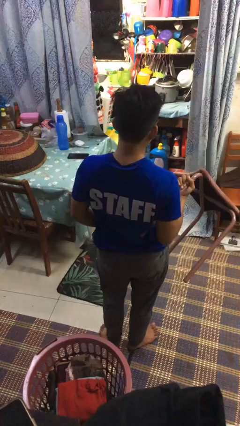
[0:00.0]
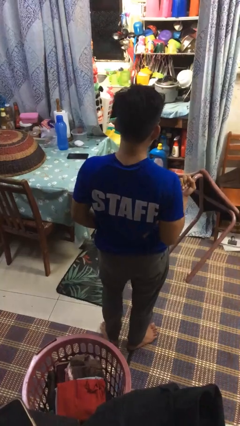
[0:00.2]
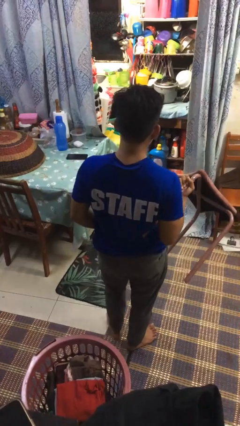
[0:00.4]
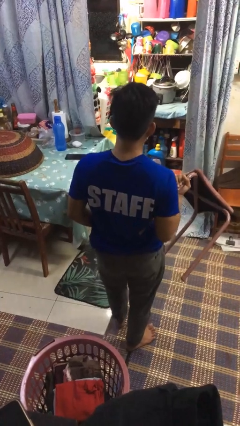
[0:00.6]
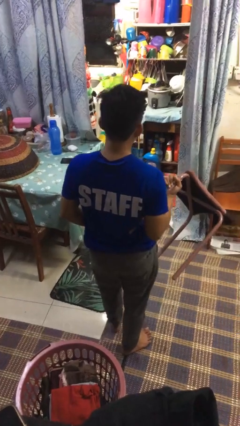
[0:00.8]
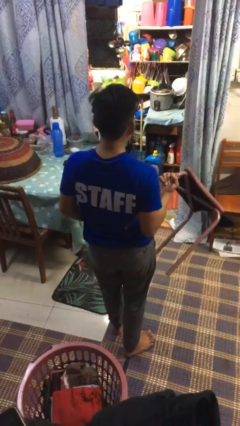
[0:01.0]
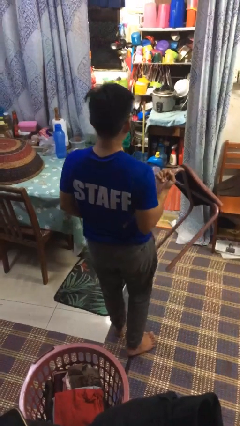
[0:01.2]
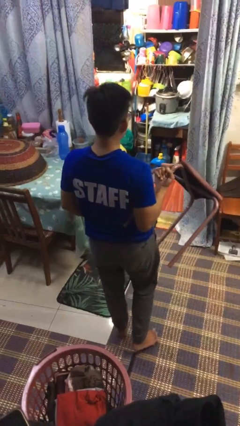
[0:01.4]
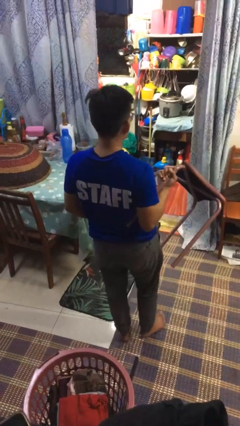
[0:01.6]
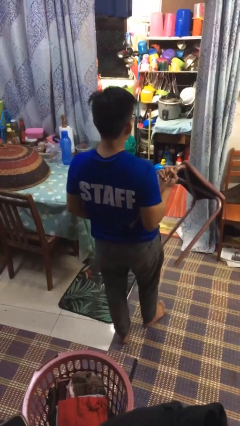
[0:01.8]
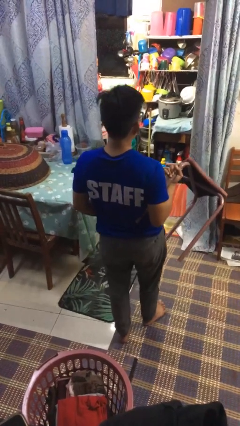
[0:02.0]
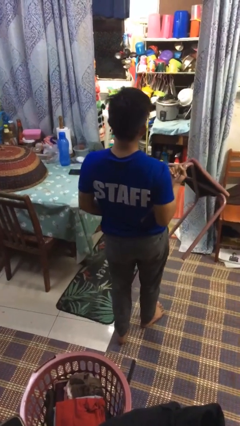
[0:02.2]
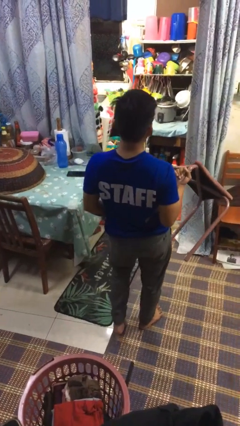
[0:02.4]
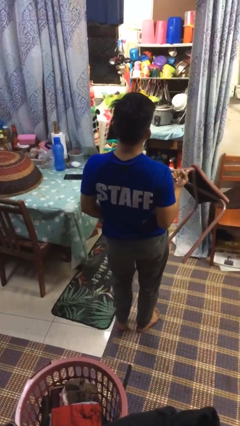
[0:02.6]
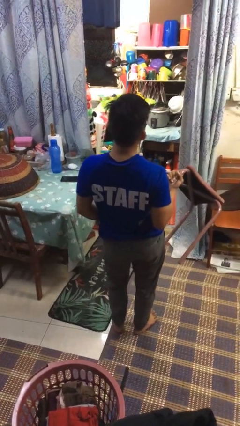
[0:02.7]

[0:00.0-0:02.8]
person carries furniture

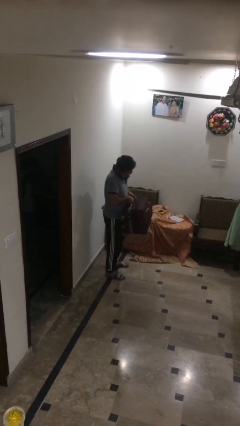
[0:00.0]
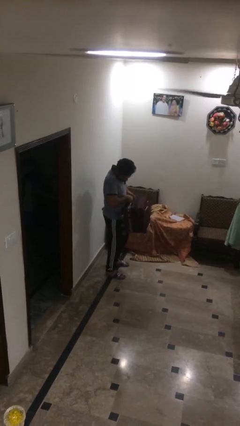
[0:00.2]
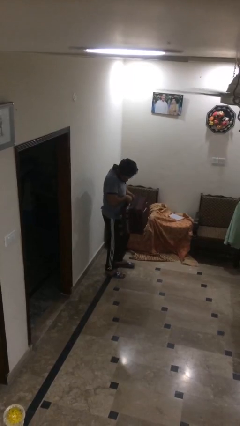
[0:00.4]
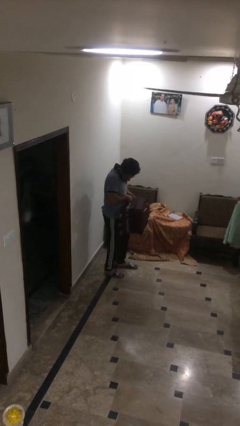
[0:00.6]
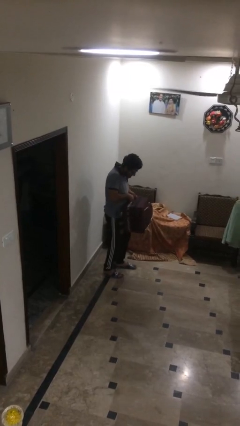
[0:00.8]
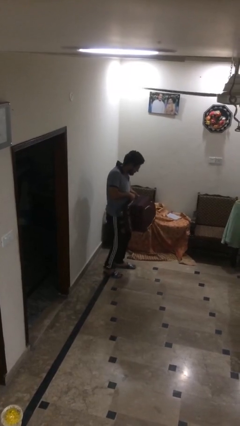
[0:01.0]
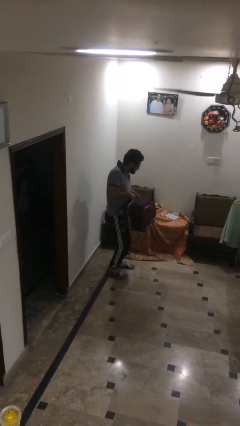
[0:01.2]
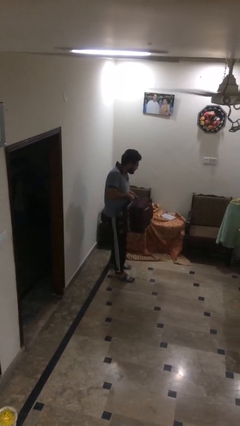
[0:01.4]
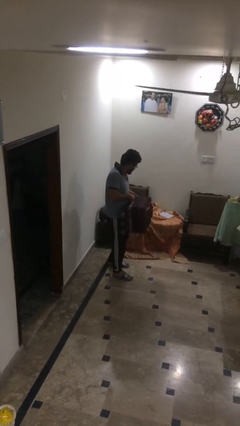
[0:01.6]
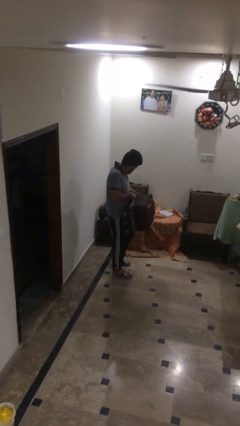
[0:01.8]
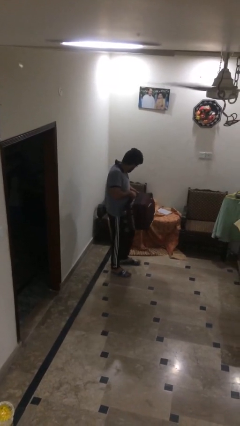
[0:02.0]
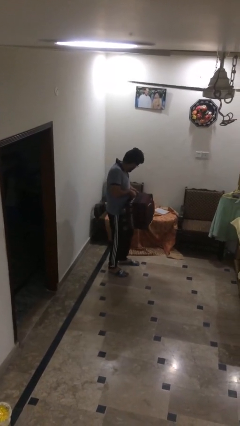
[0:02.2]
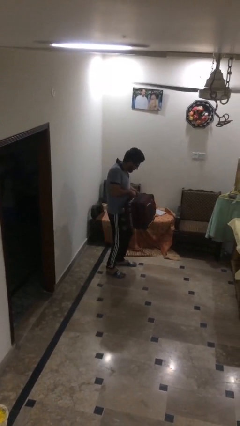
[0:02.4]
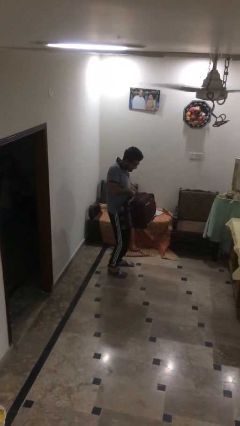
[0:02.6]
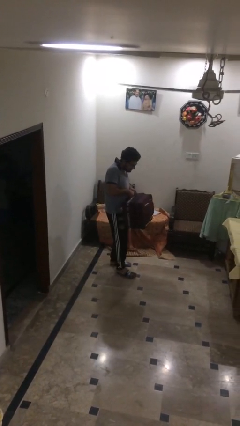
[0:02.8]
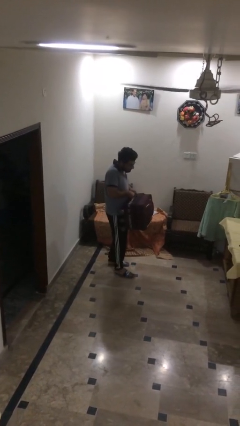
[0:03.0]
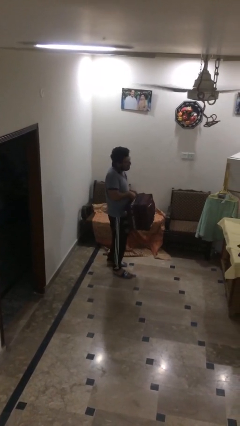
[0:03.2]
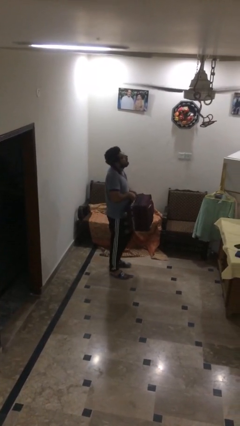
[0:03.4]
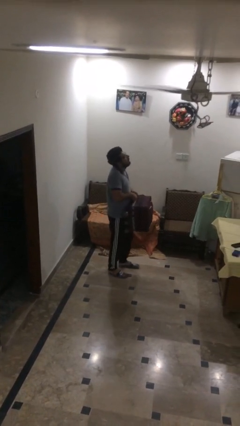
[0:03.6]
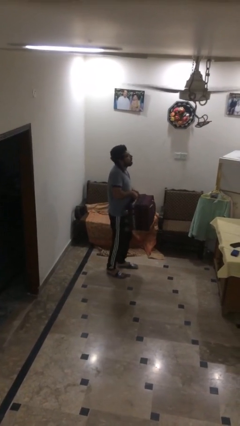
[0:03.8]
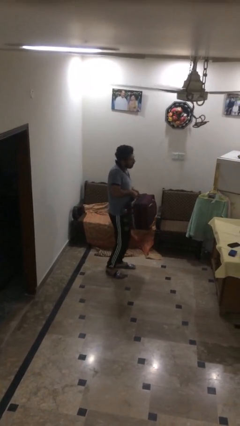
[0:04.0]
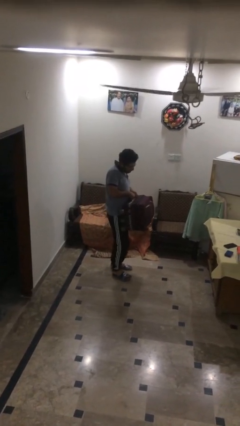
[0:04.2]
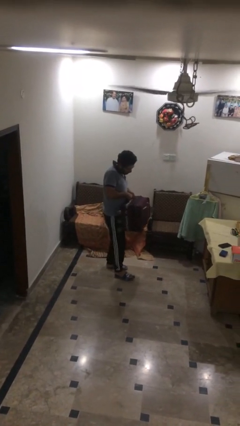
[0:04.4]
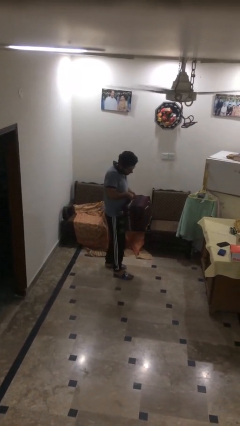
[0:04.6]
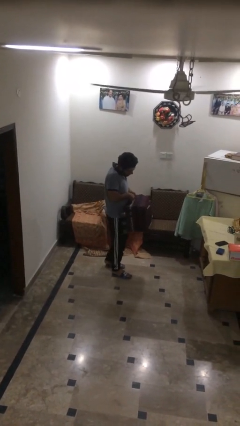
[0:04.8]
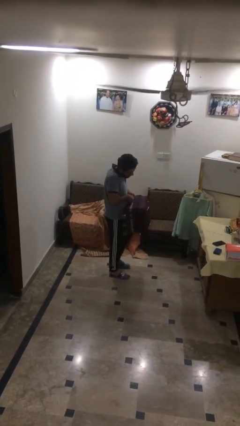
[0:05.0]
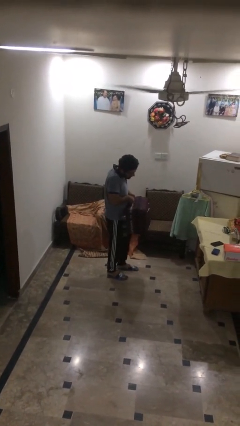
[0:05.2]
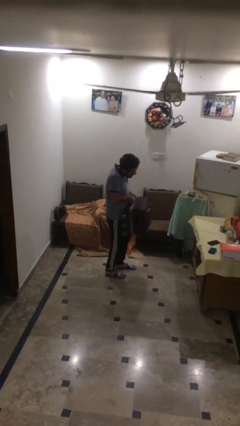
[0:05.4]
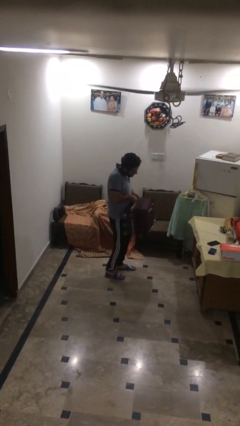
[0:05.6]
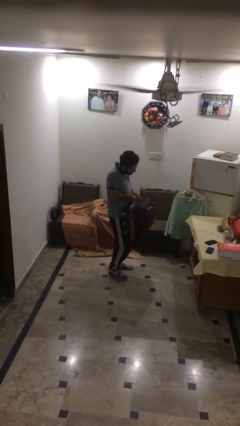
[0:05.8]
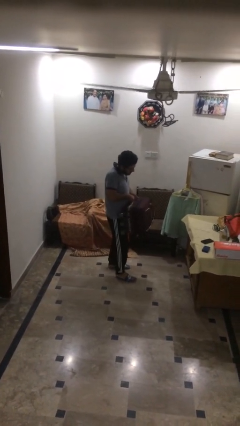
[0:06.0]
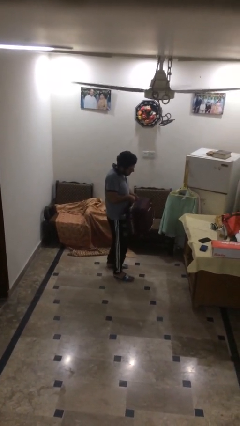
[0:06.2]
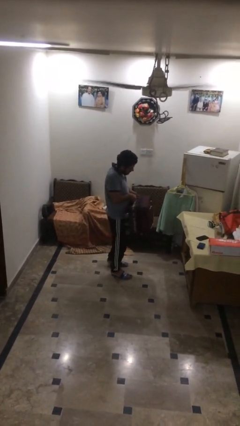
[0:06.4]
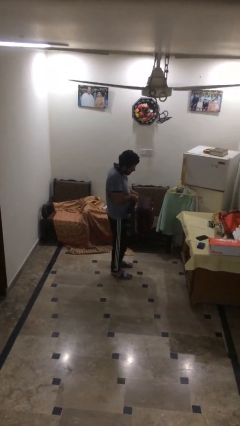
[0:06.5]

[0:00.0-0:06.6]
person carries heavy object

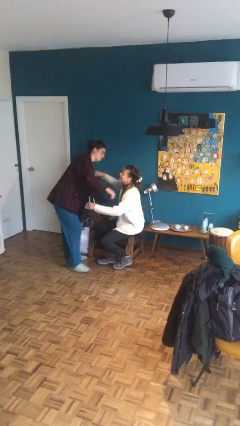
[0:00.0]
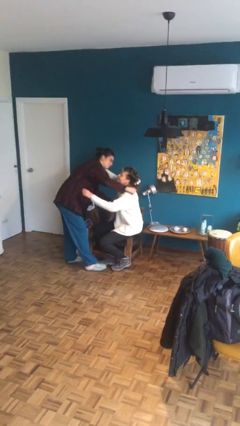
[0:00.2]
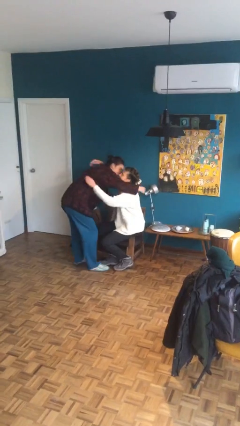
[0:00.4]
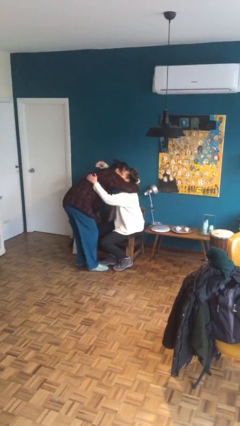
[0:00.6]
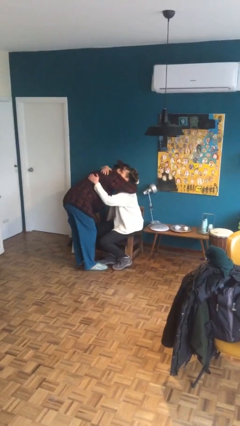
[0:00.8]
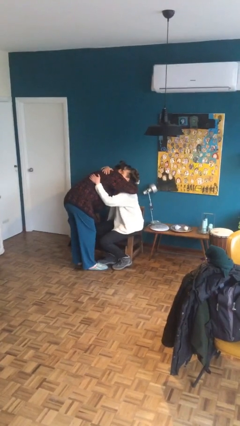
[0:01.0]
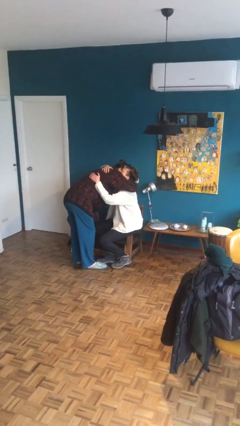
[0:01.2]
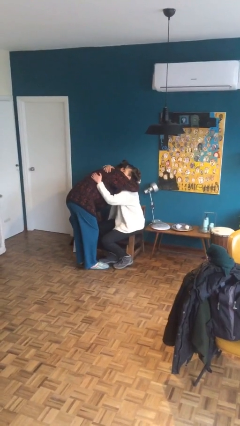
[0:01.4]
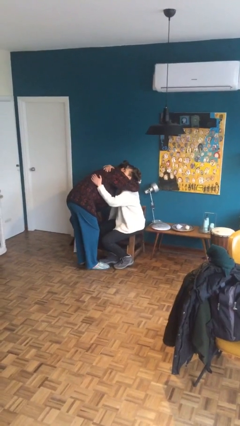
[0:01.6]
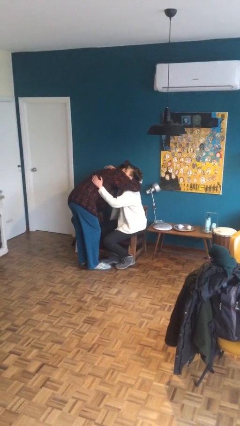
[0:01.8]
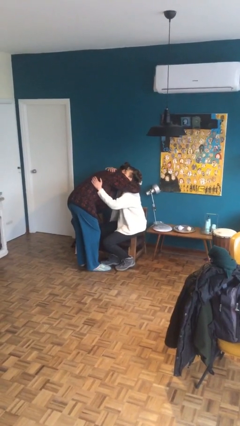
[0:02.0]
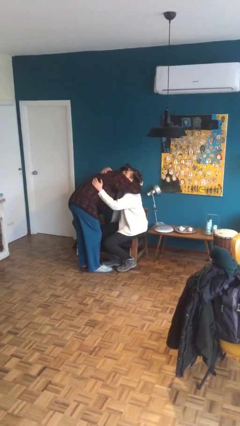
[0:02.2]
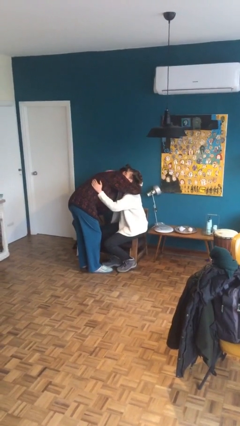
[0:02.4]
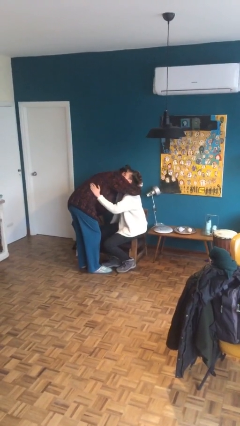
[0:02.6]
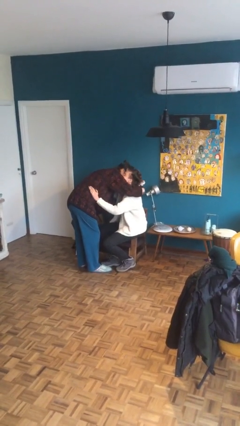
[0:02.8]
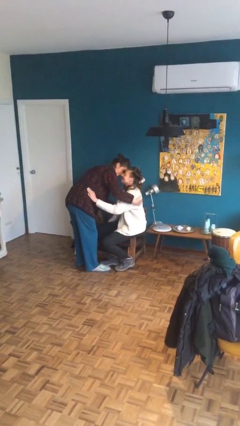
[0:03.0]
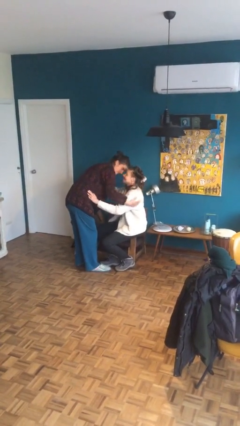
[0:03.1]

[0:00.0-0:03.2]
person embraces person

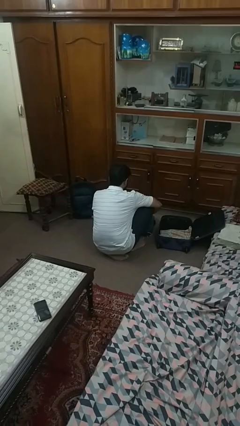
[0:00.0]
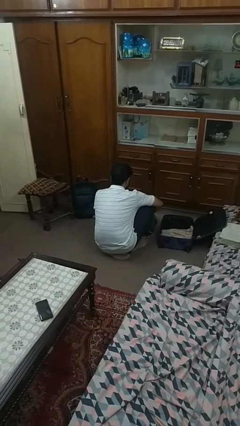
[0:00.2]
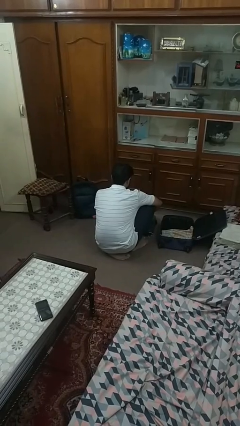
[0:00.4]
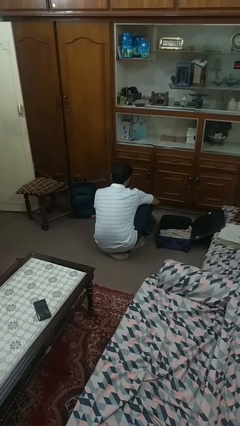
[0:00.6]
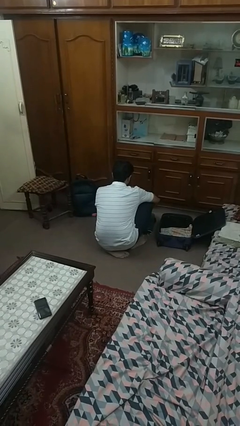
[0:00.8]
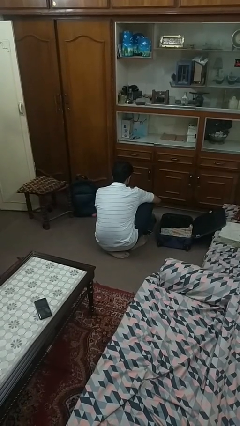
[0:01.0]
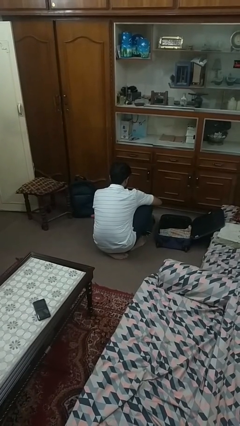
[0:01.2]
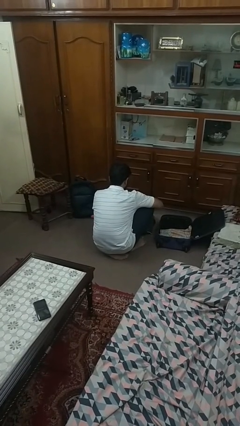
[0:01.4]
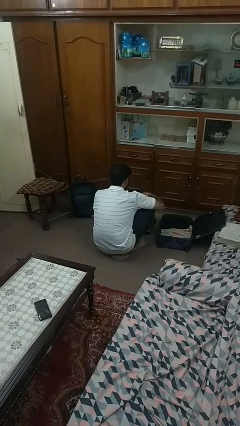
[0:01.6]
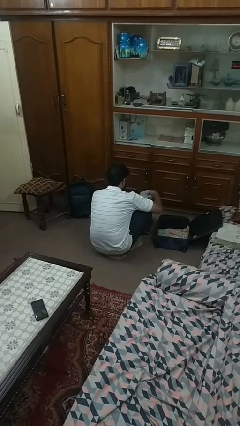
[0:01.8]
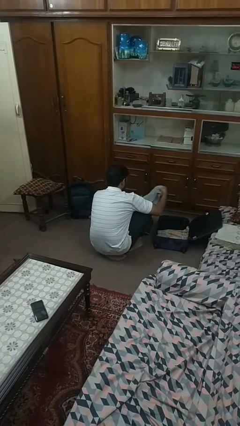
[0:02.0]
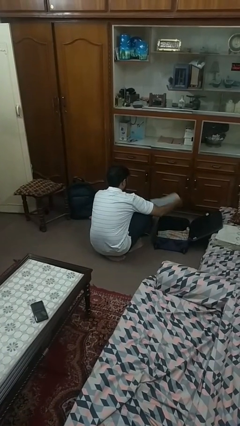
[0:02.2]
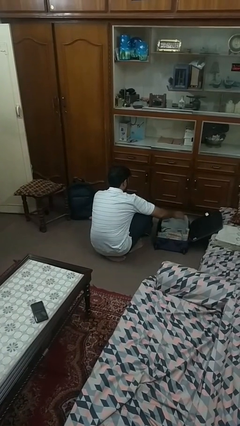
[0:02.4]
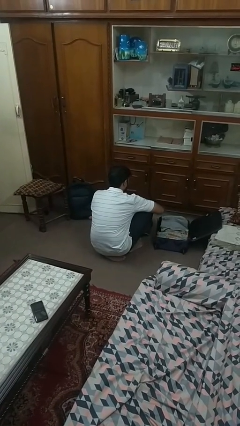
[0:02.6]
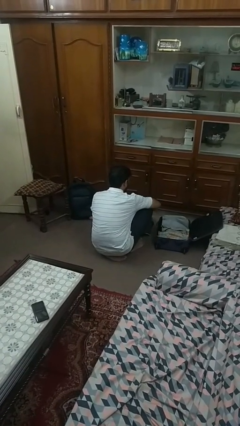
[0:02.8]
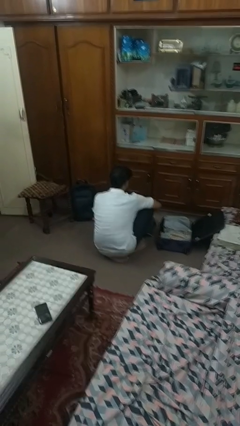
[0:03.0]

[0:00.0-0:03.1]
person loads clothes into suitcase

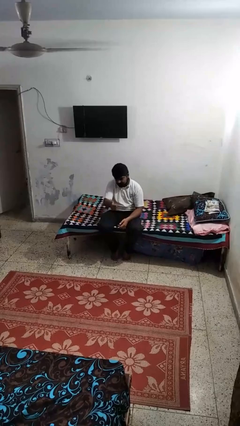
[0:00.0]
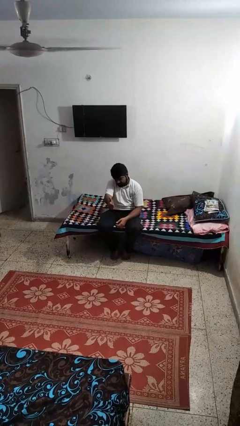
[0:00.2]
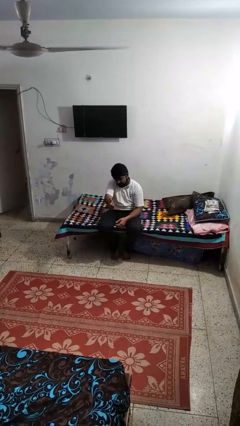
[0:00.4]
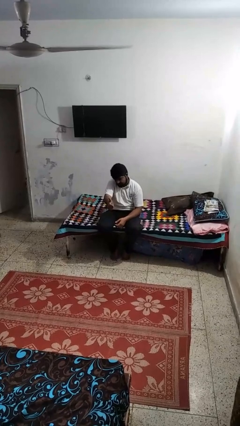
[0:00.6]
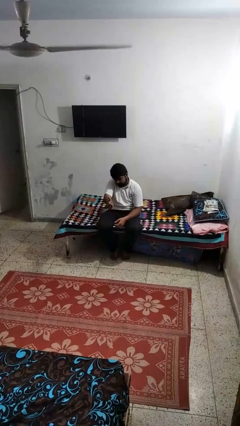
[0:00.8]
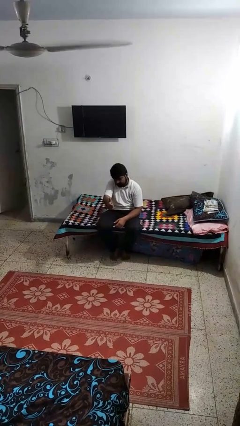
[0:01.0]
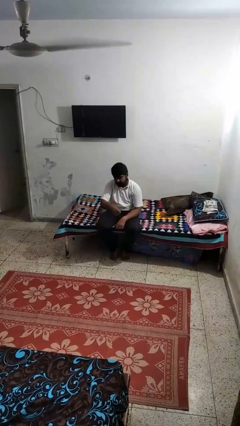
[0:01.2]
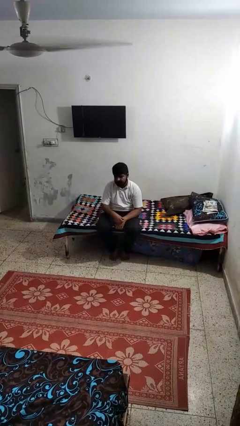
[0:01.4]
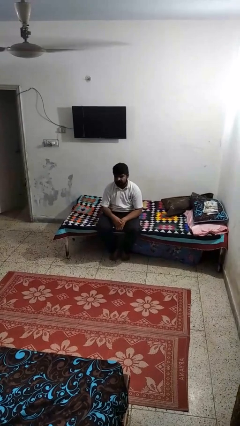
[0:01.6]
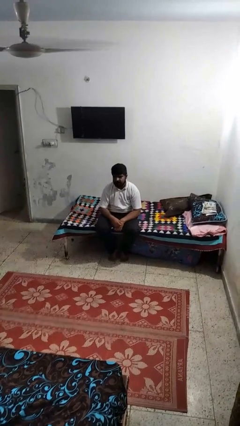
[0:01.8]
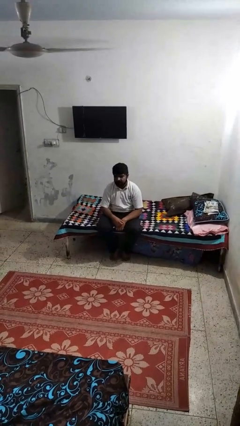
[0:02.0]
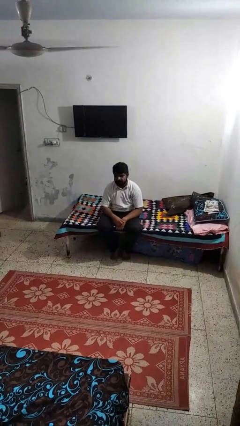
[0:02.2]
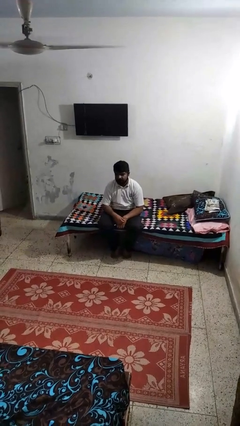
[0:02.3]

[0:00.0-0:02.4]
person gestures thumbs up
